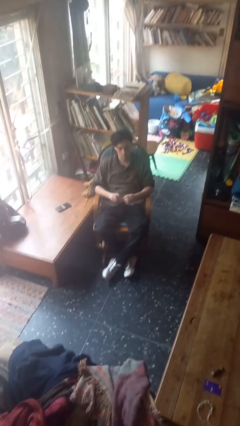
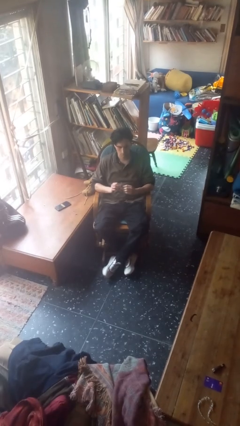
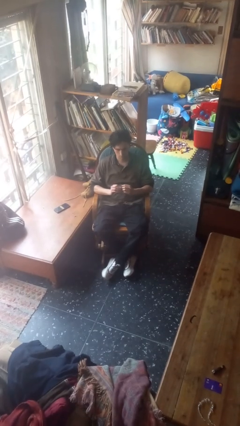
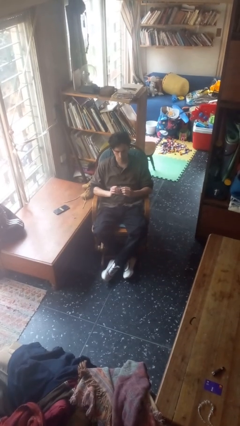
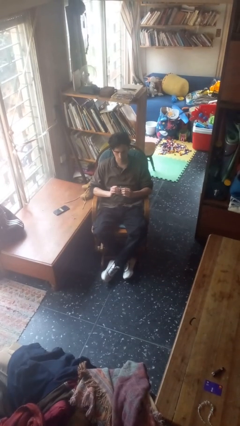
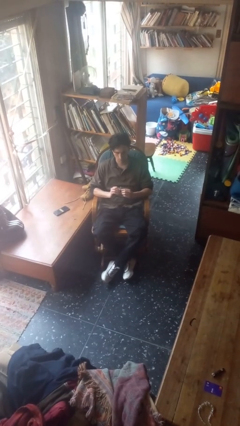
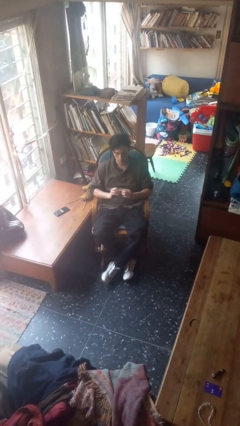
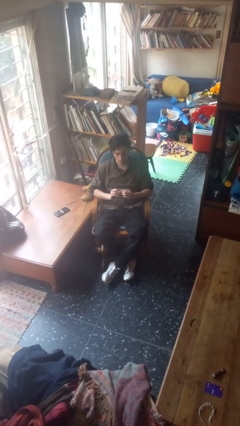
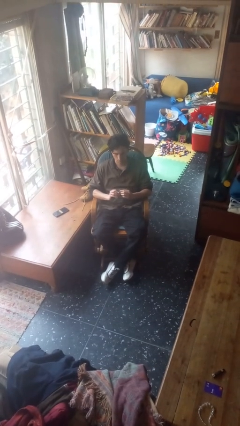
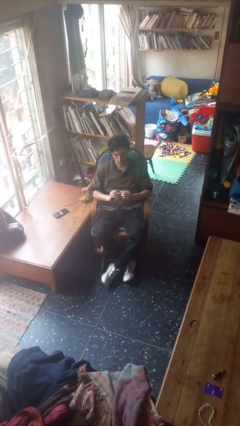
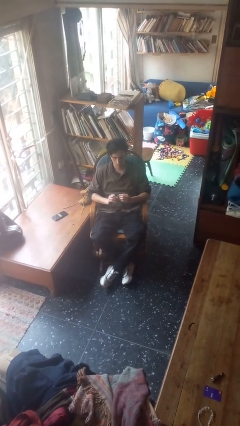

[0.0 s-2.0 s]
person files fingernails

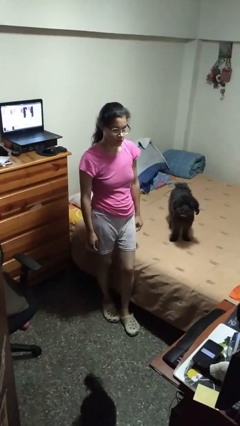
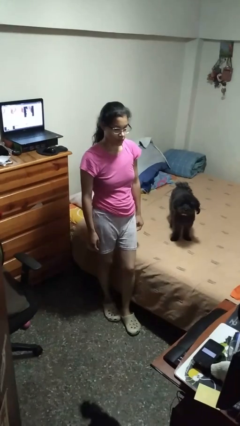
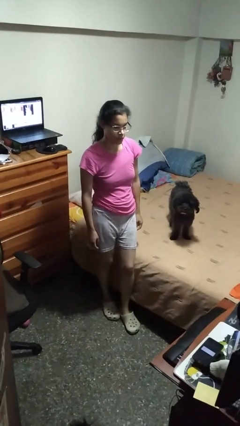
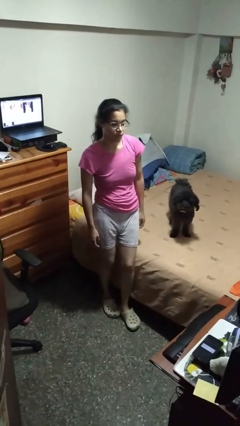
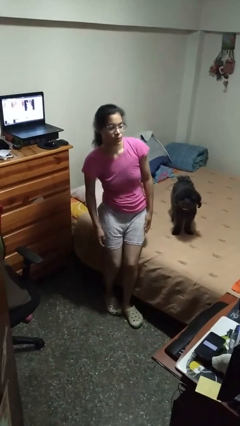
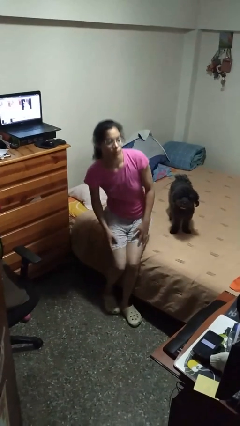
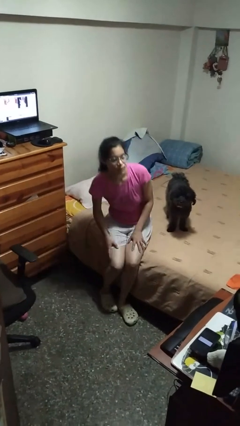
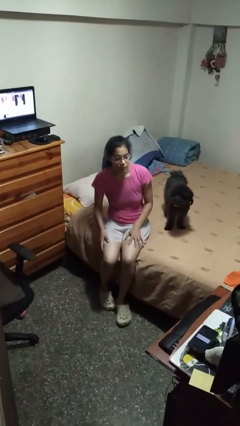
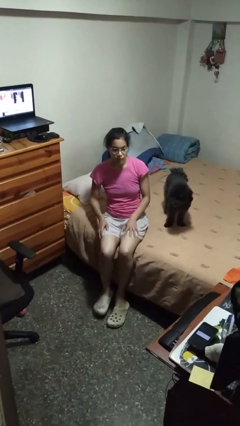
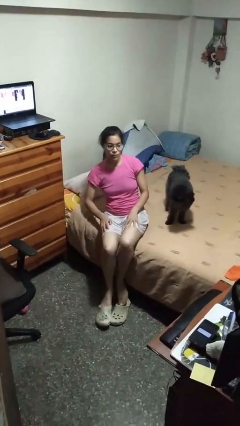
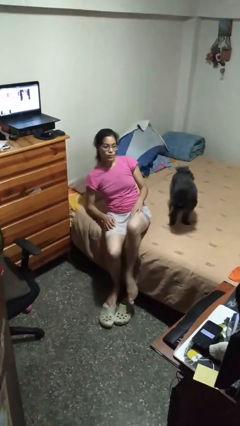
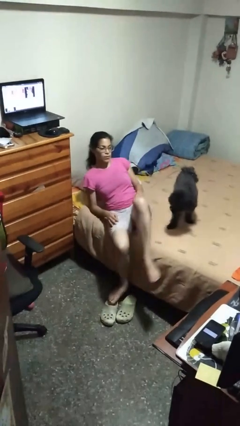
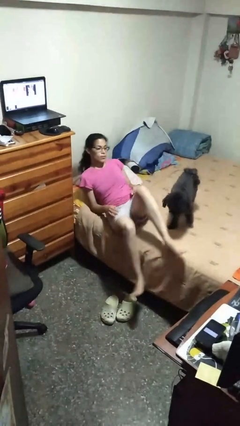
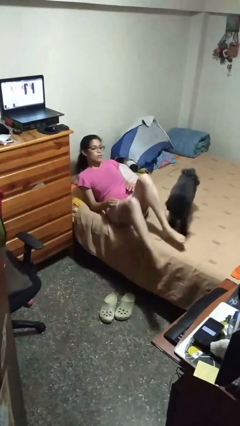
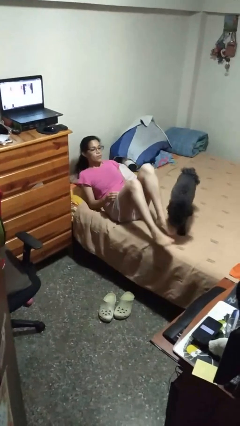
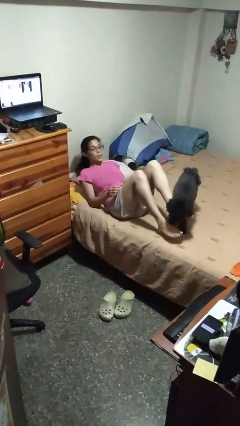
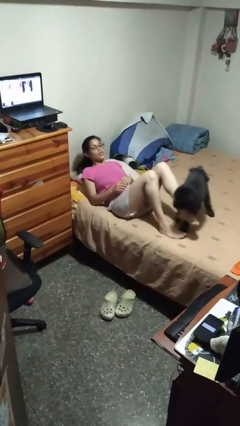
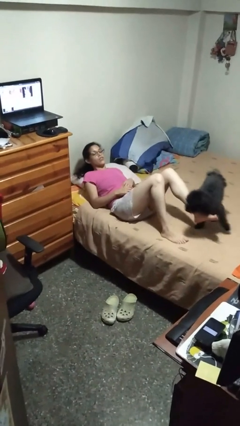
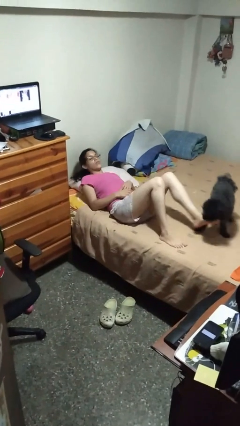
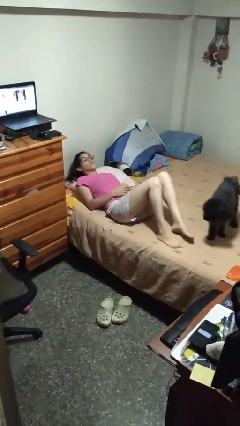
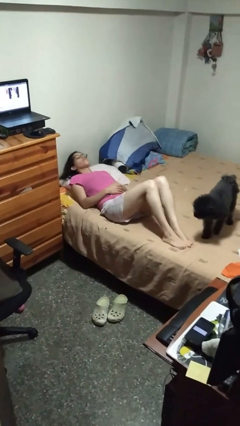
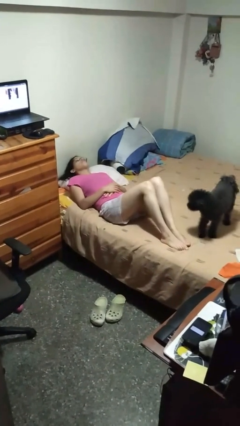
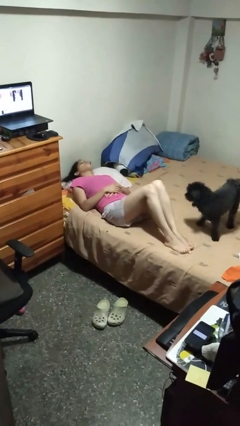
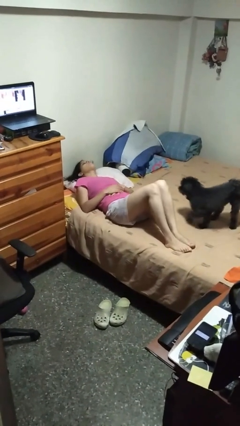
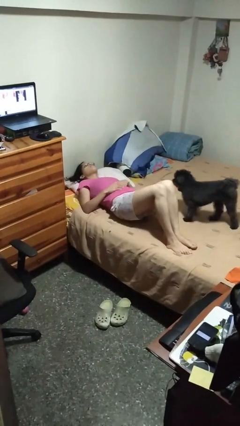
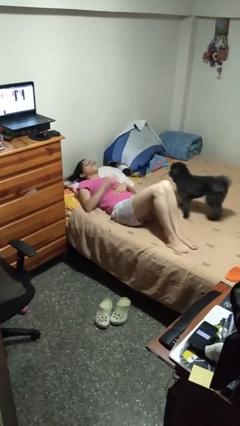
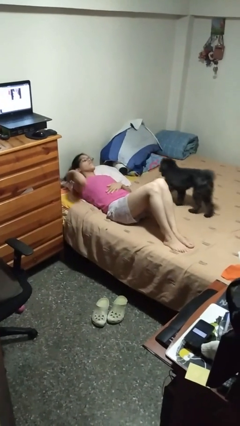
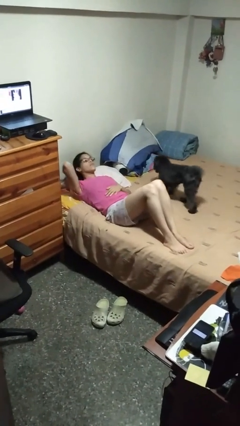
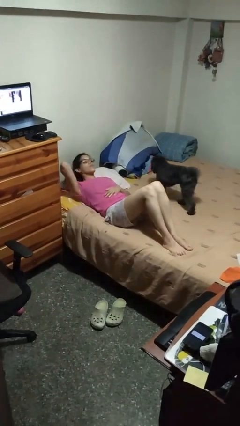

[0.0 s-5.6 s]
person lies down on bed

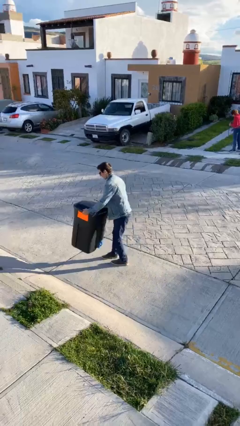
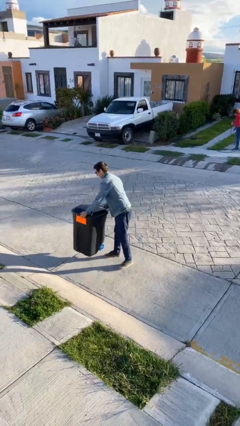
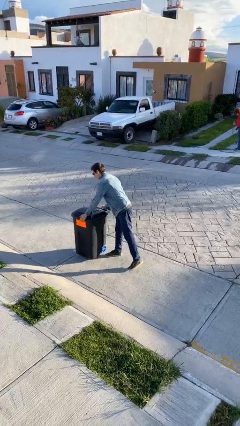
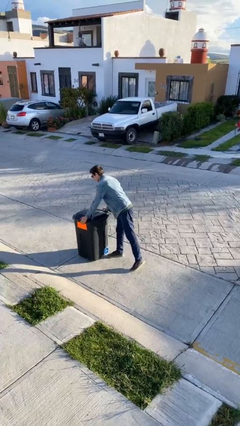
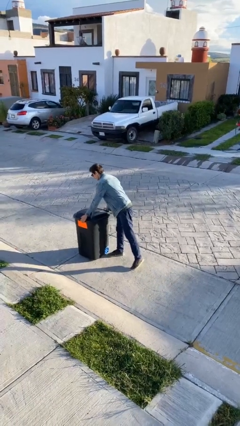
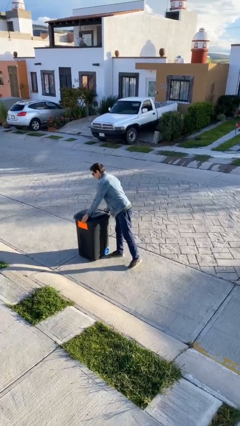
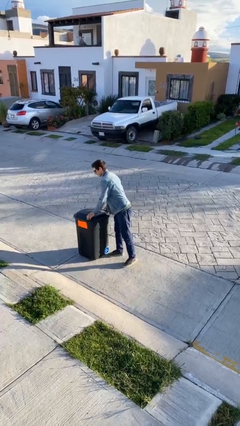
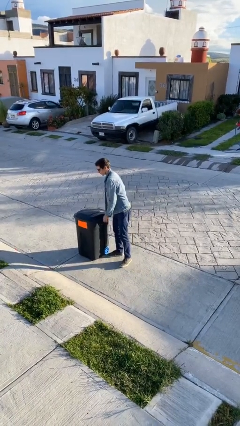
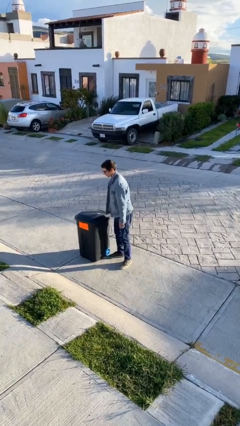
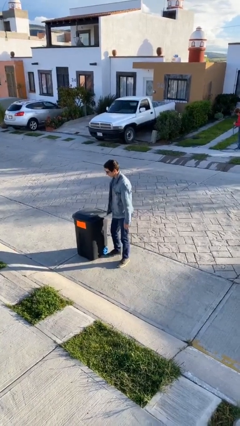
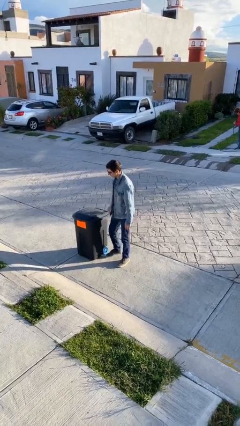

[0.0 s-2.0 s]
person puts down object on floor

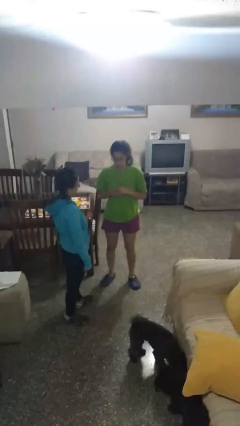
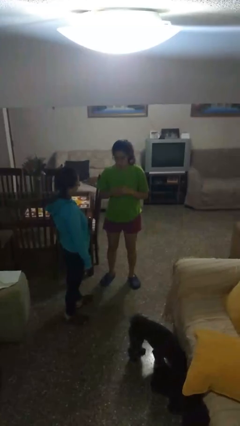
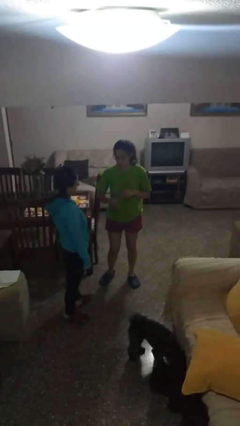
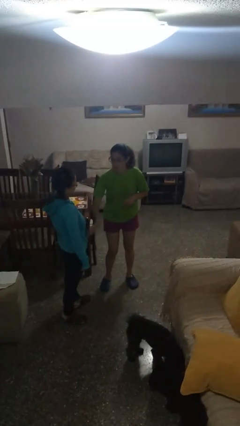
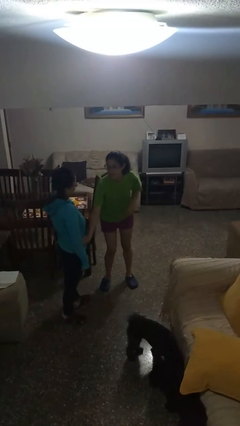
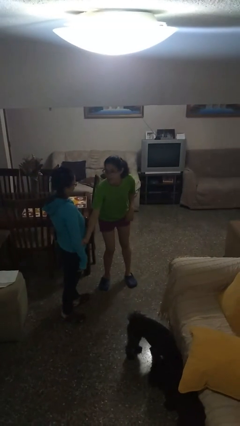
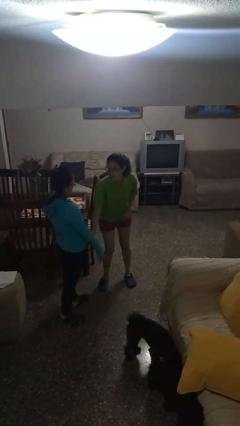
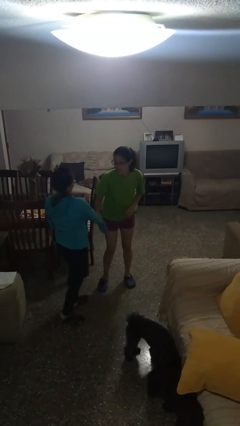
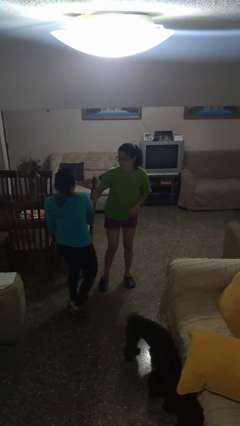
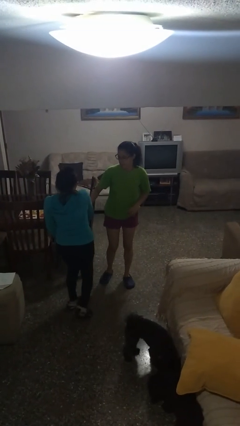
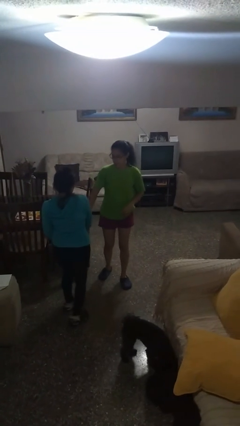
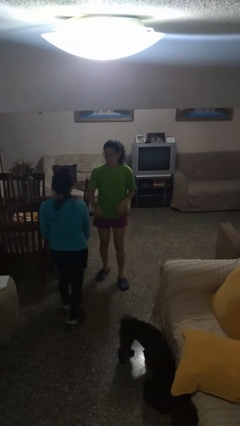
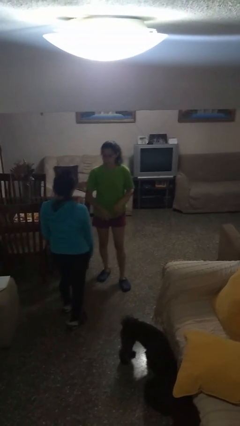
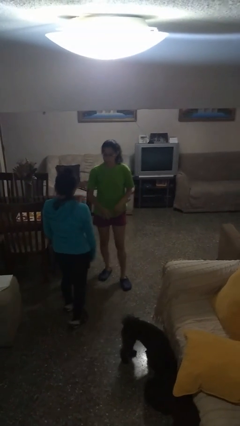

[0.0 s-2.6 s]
person grabs person by forearm

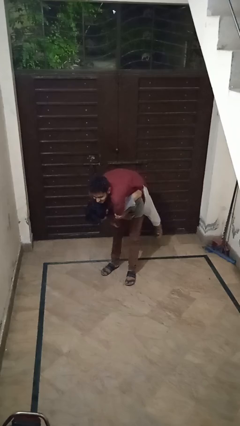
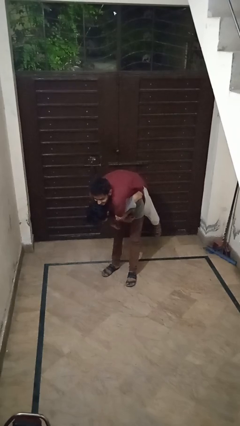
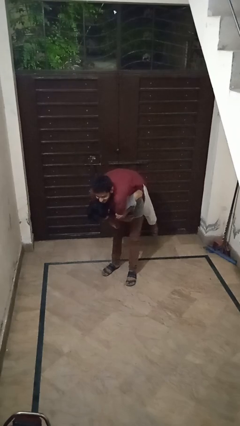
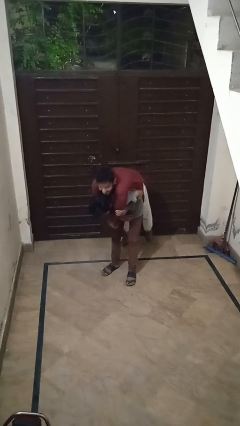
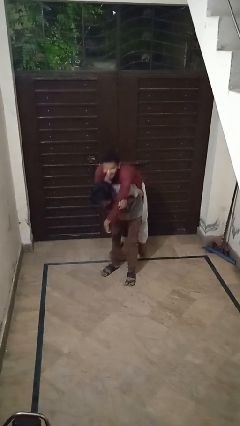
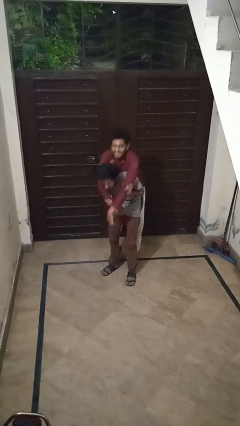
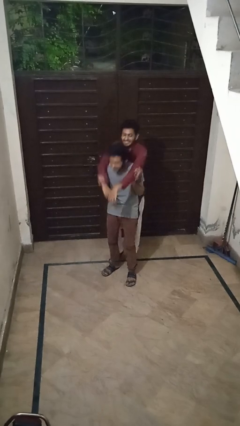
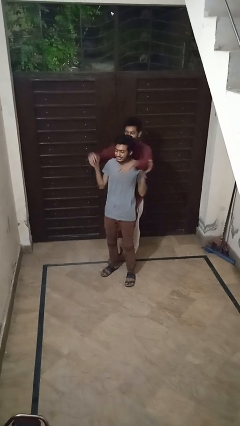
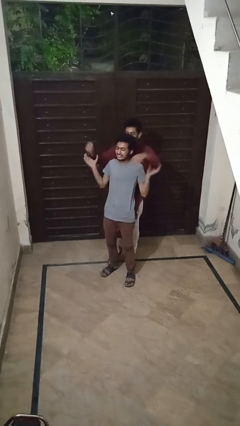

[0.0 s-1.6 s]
person puts down person

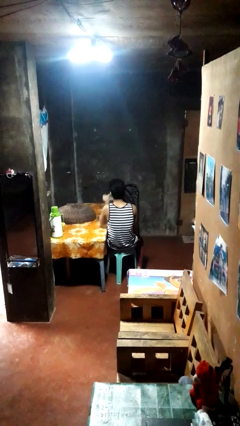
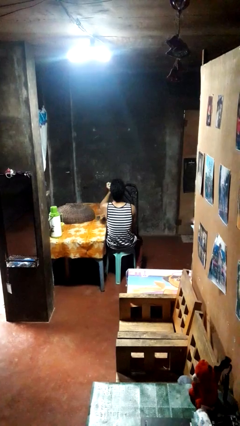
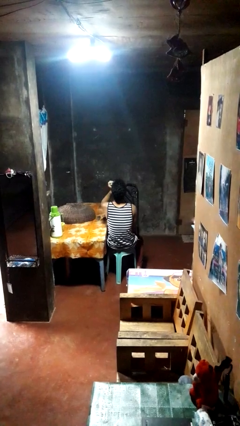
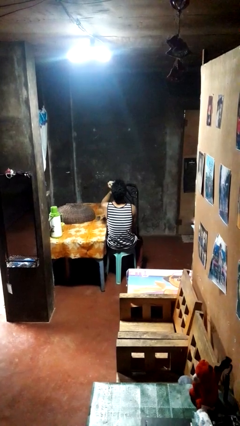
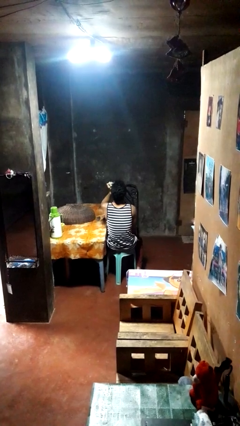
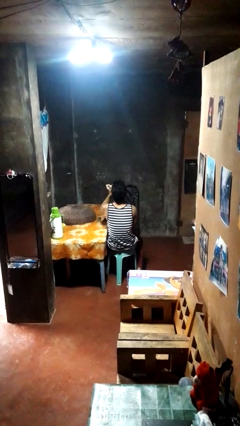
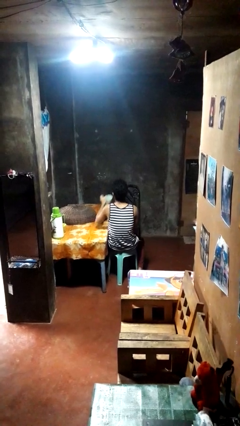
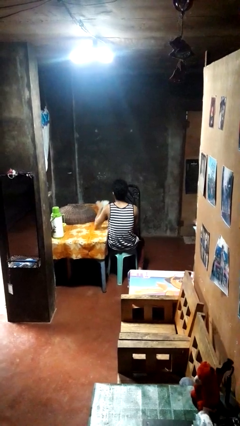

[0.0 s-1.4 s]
person drinks from mug

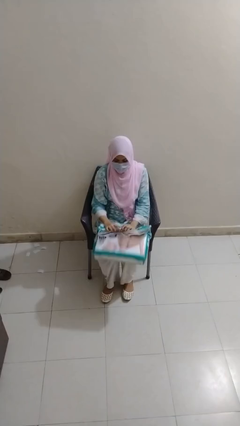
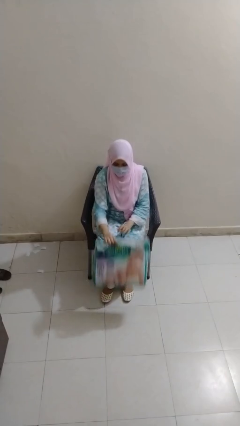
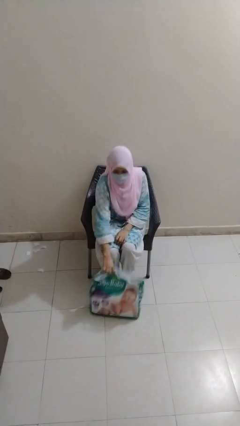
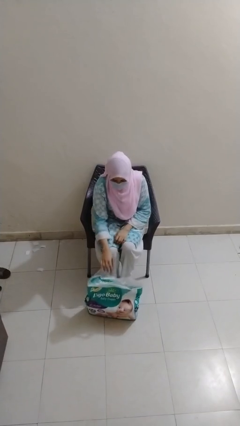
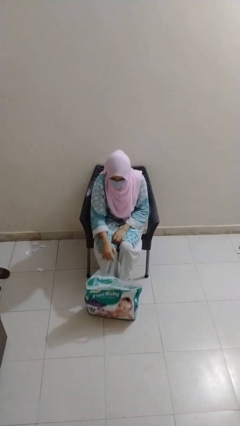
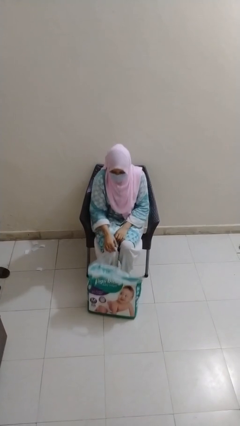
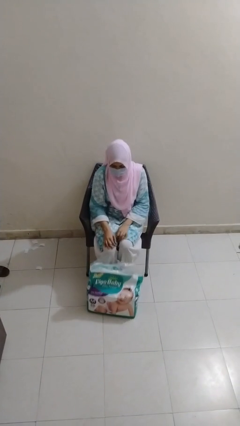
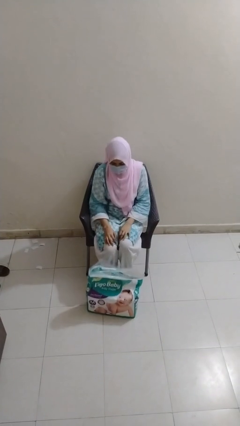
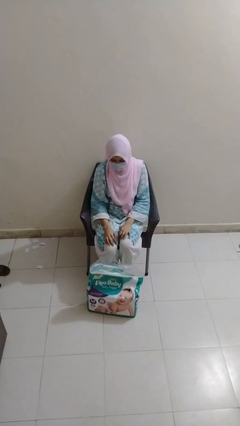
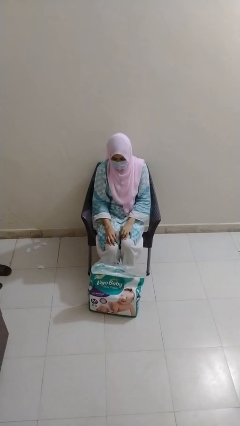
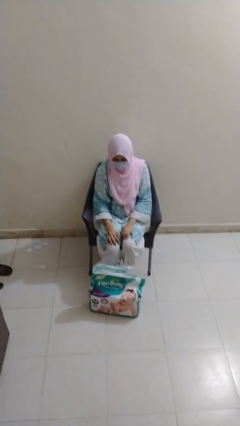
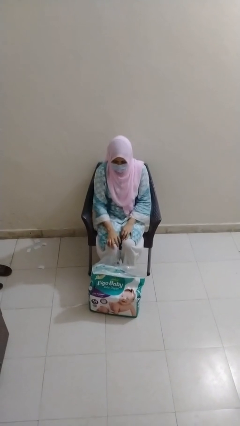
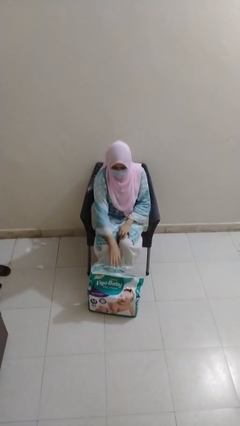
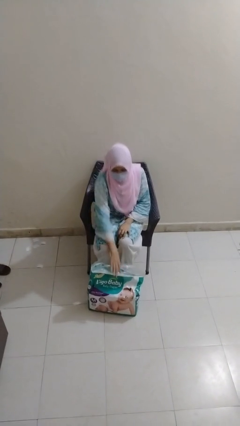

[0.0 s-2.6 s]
person drops object
